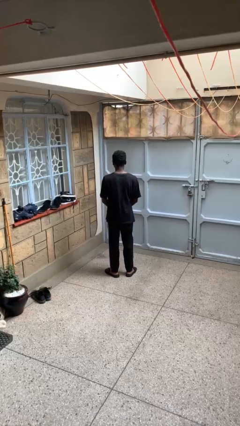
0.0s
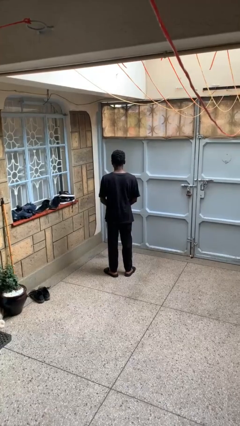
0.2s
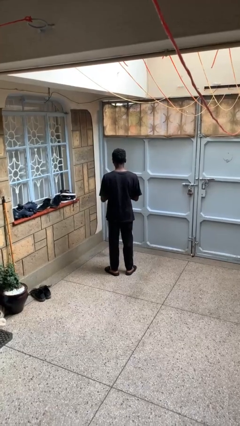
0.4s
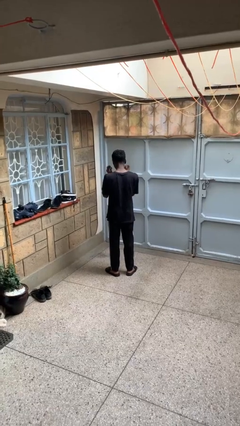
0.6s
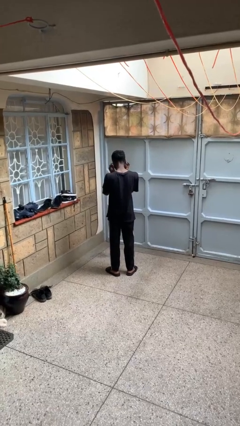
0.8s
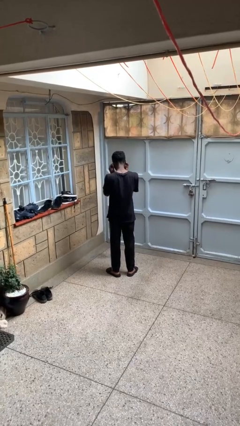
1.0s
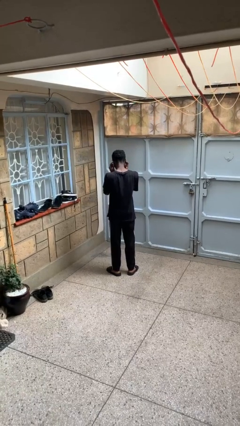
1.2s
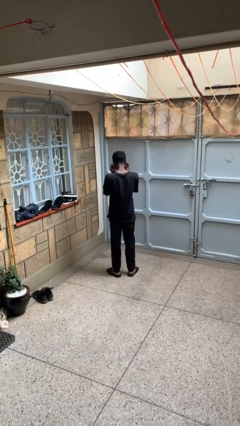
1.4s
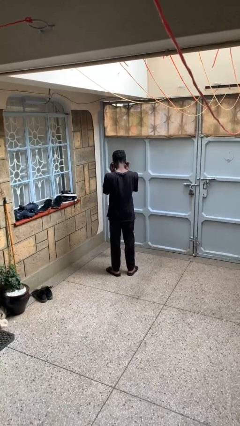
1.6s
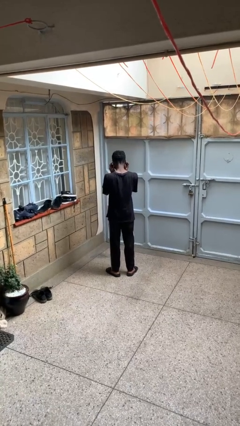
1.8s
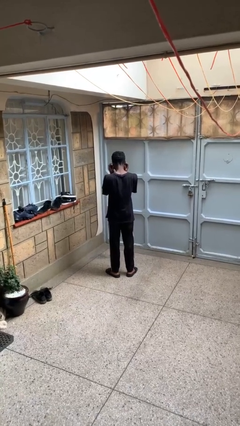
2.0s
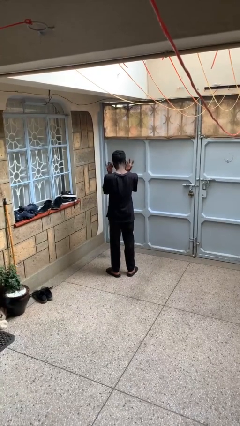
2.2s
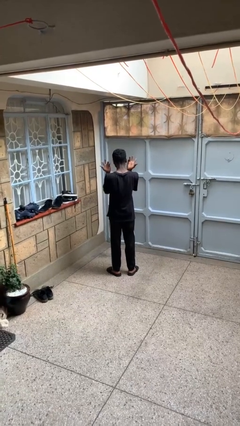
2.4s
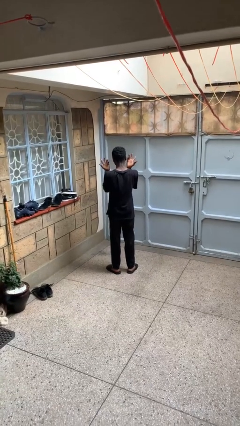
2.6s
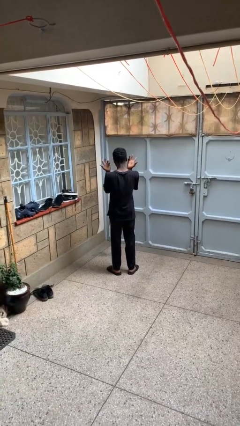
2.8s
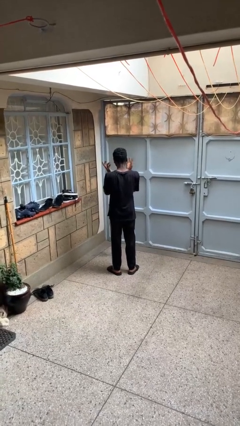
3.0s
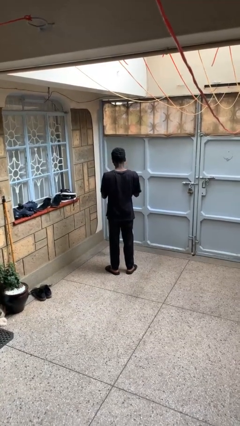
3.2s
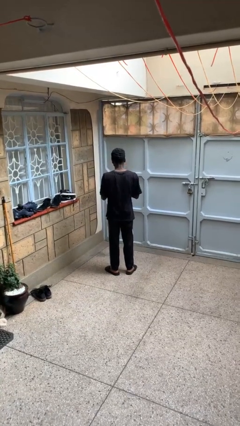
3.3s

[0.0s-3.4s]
person puts fingers in ear

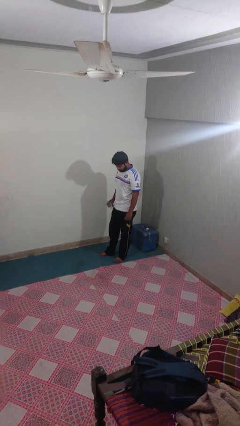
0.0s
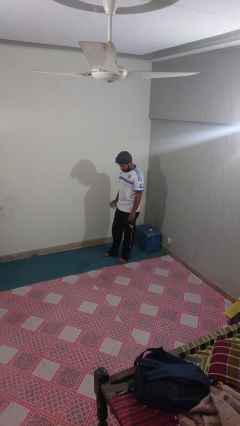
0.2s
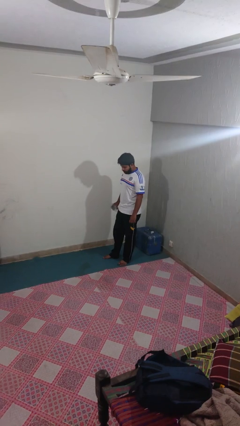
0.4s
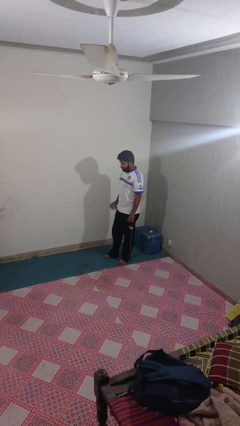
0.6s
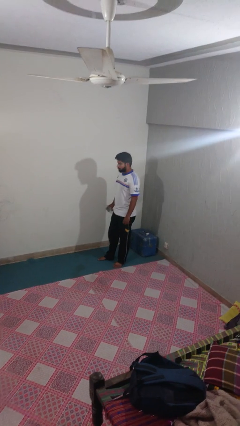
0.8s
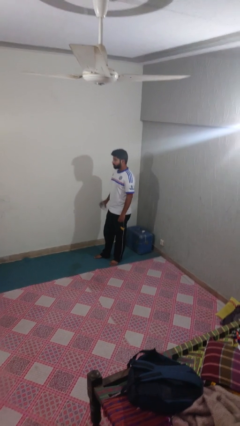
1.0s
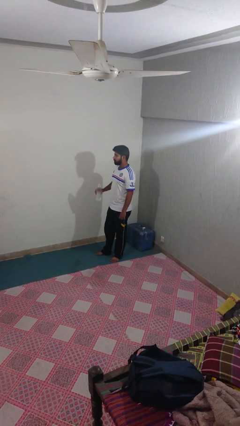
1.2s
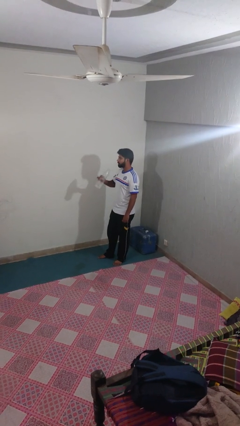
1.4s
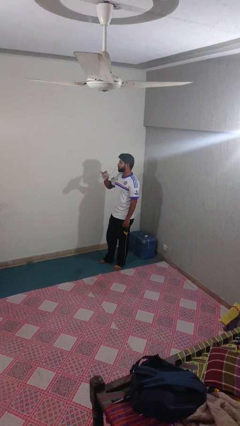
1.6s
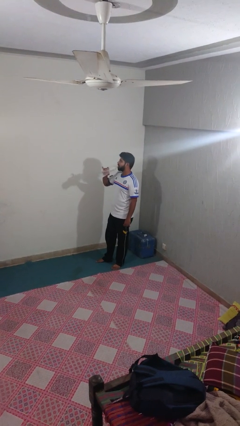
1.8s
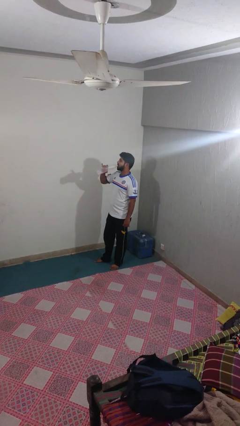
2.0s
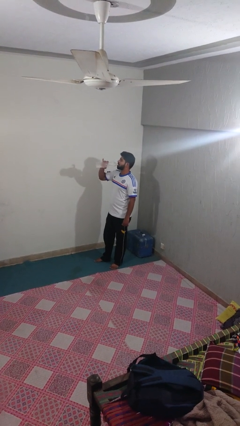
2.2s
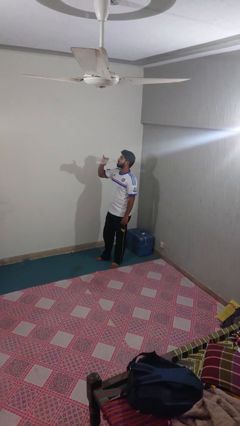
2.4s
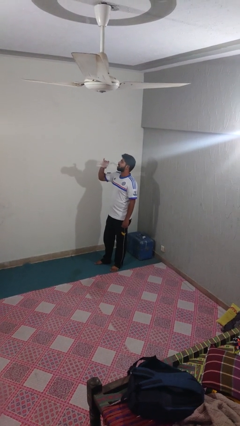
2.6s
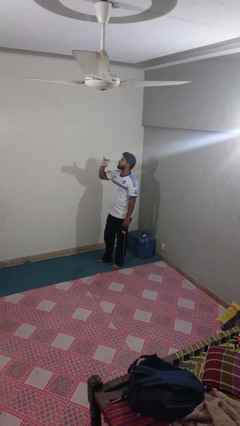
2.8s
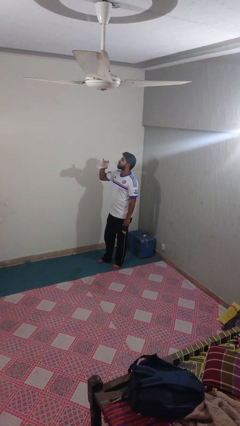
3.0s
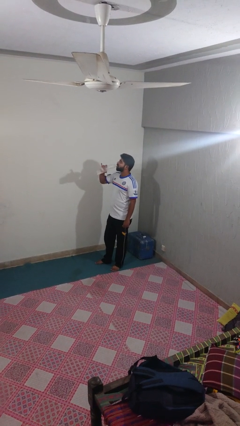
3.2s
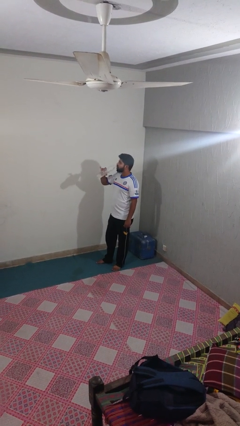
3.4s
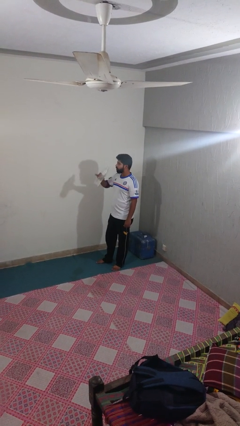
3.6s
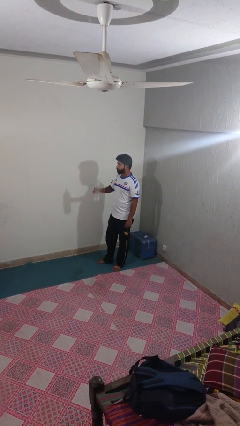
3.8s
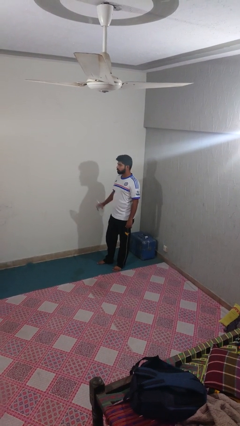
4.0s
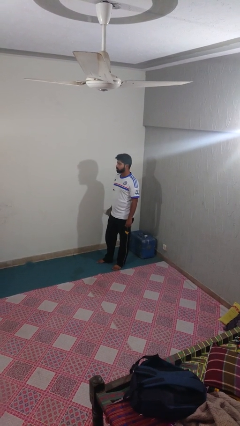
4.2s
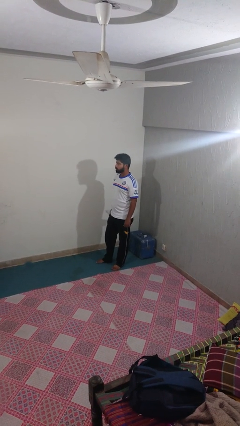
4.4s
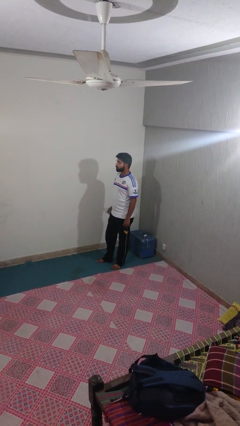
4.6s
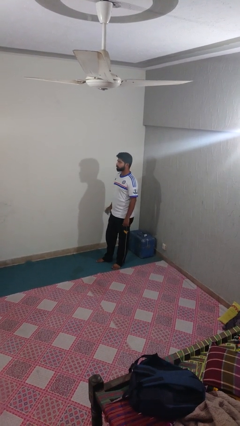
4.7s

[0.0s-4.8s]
person drinks from bottle

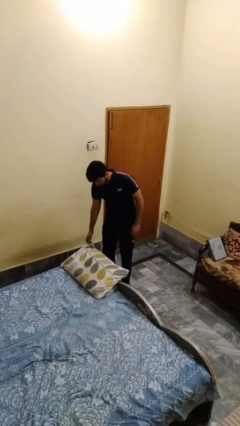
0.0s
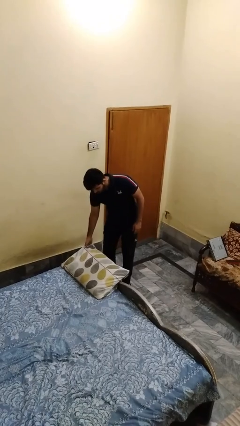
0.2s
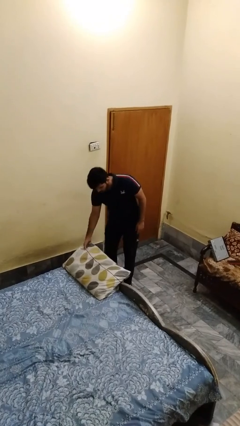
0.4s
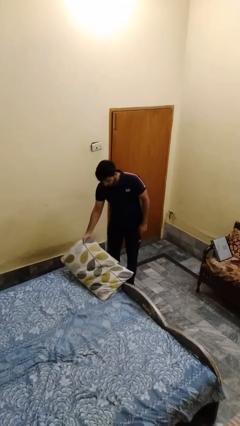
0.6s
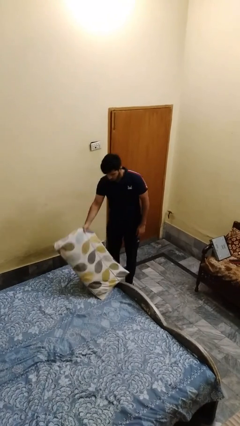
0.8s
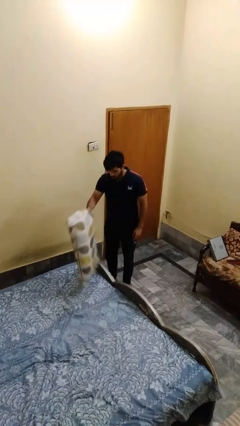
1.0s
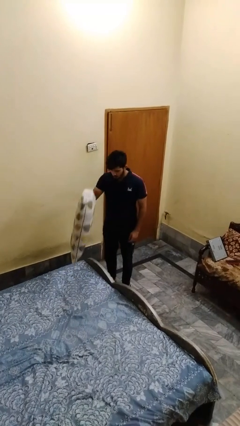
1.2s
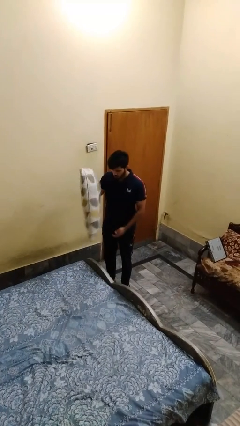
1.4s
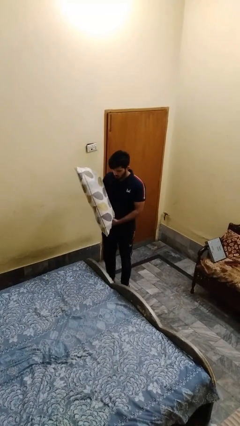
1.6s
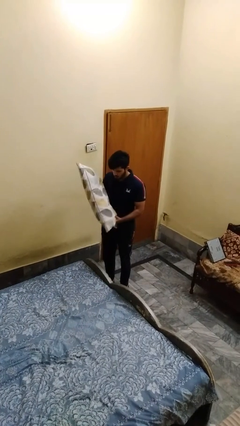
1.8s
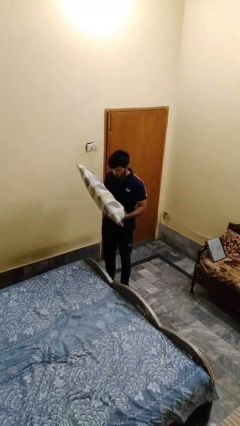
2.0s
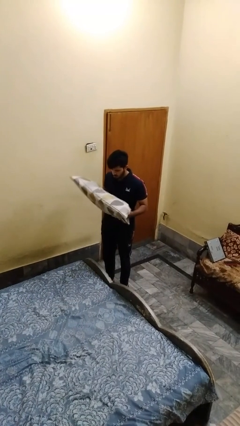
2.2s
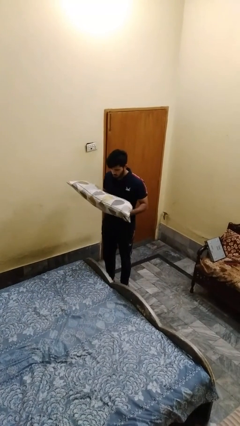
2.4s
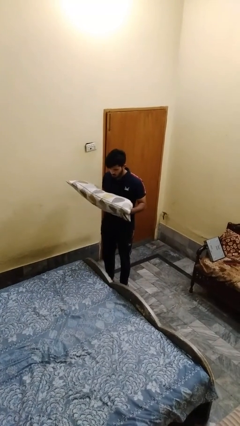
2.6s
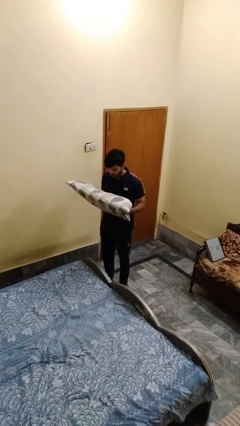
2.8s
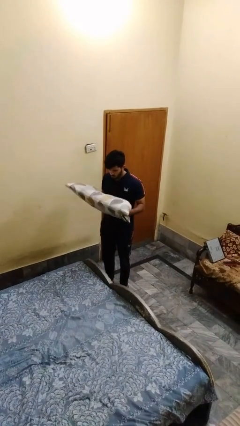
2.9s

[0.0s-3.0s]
person picks up object from bed

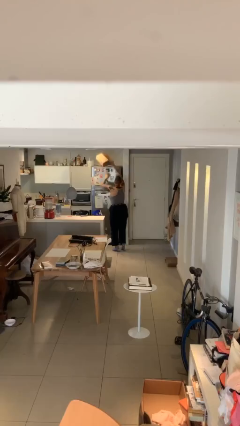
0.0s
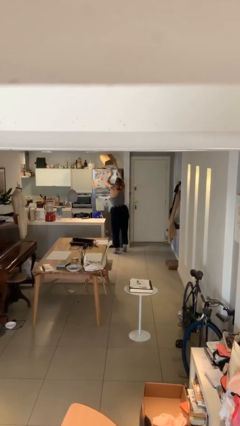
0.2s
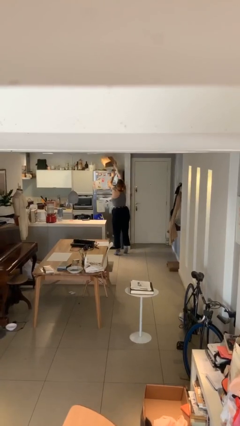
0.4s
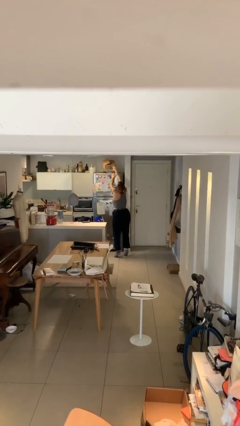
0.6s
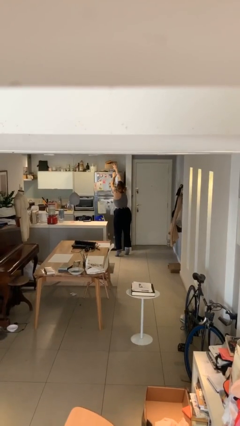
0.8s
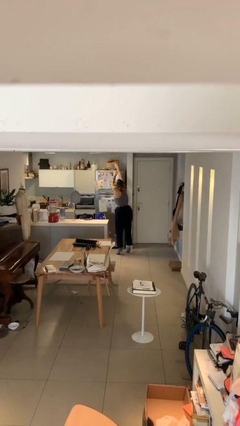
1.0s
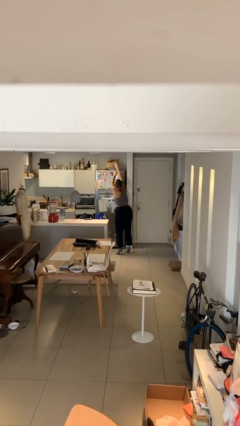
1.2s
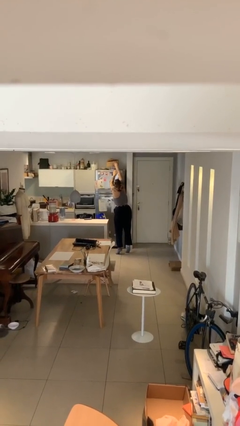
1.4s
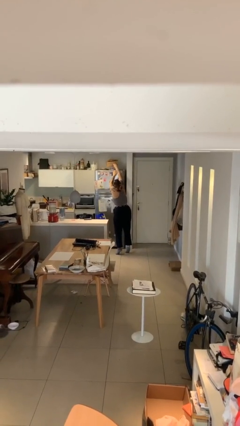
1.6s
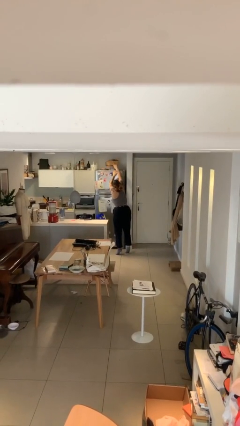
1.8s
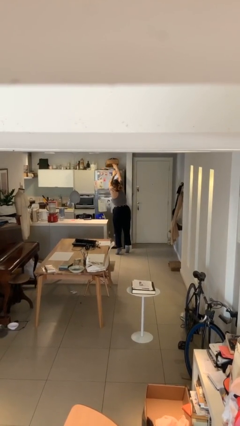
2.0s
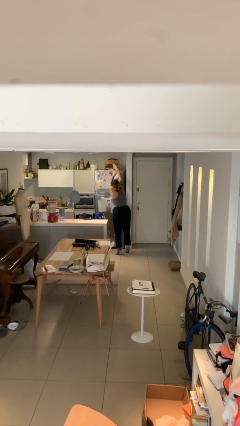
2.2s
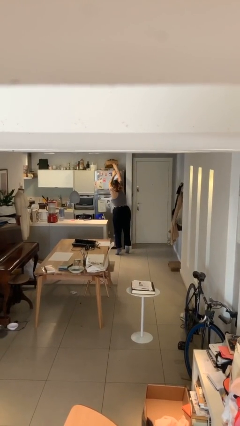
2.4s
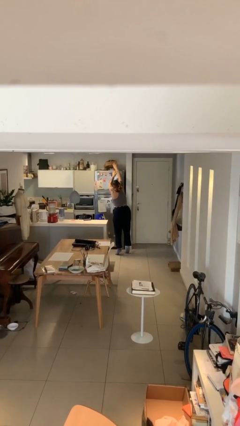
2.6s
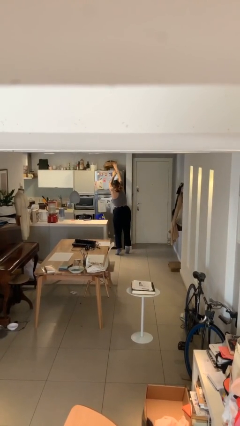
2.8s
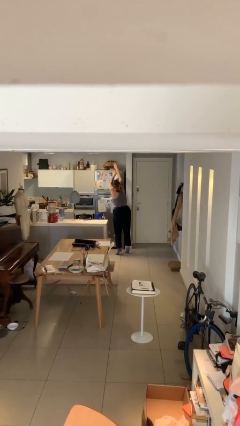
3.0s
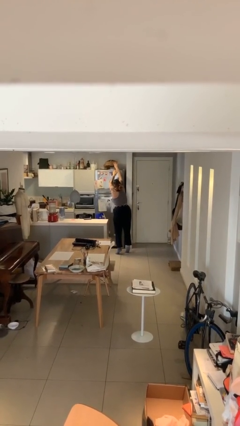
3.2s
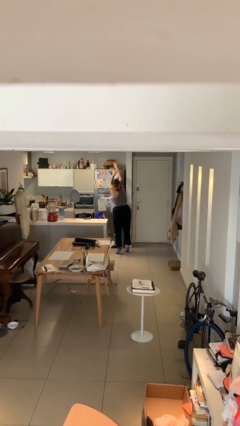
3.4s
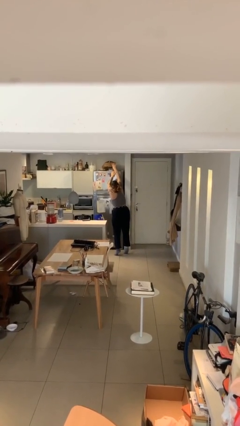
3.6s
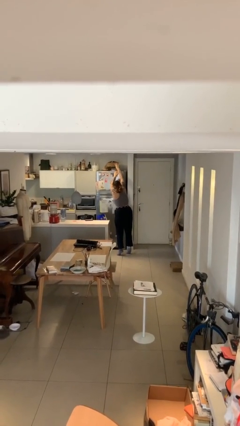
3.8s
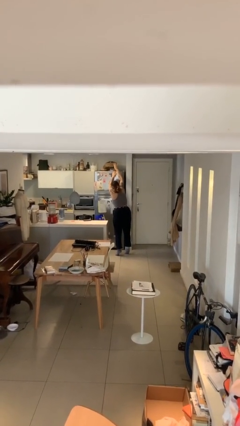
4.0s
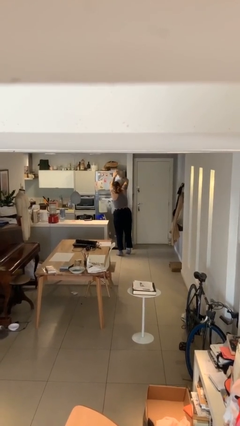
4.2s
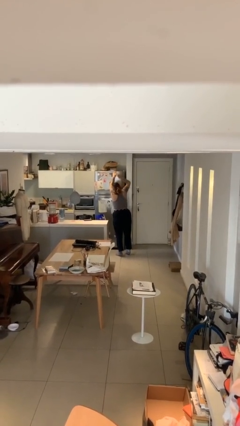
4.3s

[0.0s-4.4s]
person puts down object on shelf

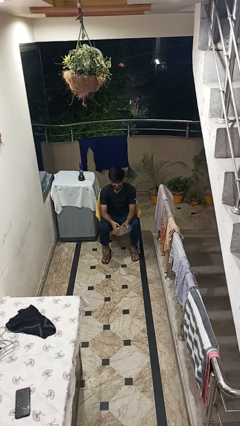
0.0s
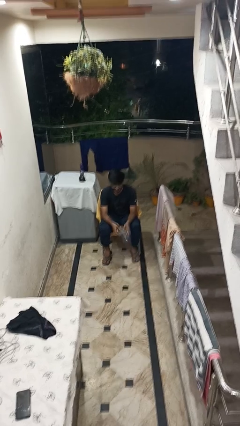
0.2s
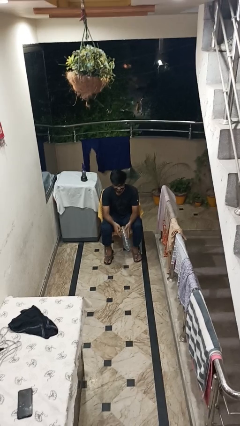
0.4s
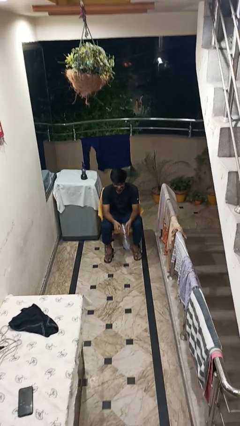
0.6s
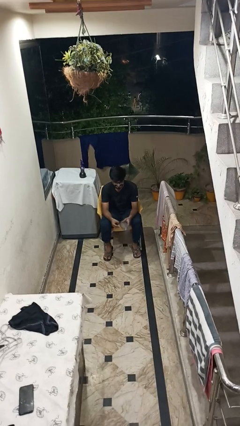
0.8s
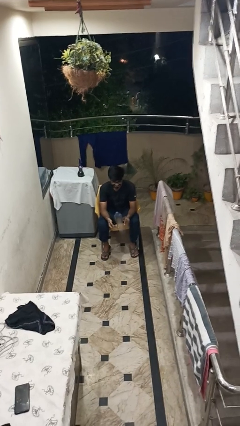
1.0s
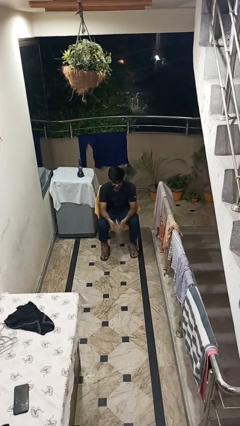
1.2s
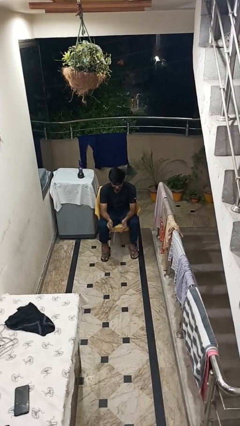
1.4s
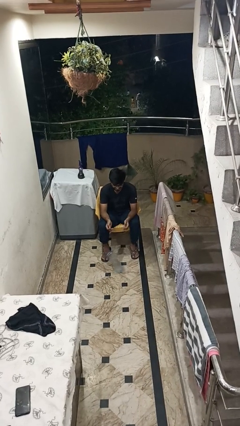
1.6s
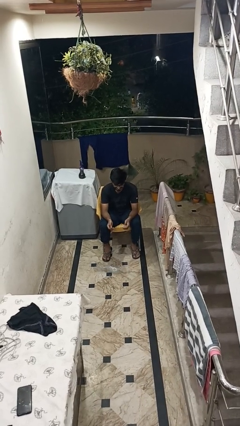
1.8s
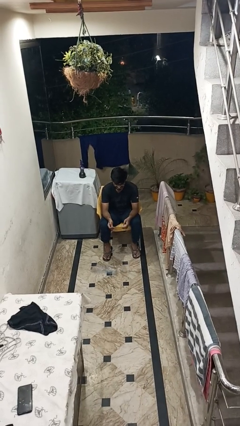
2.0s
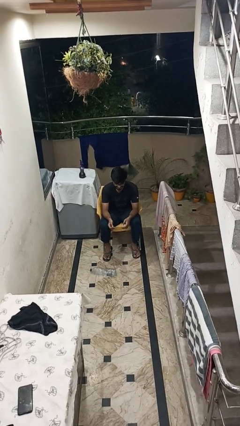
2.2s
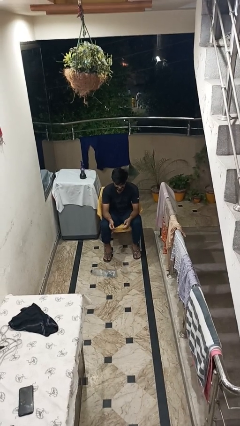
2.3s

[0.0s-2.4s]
person drops object
